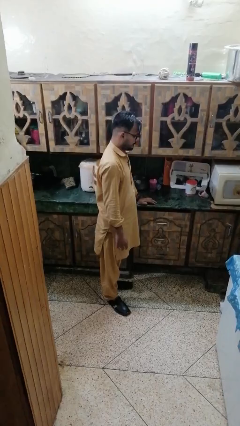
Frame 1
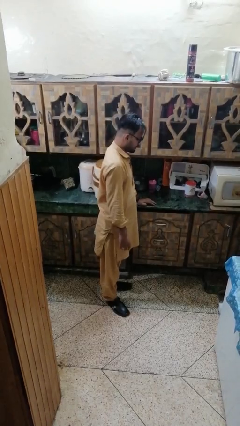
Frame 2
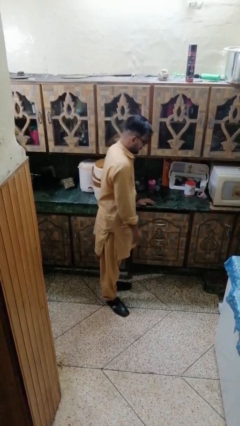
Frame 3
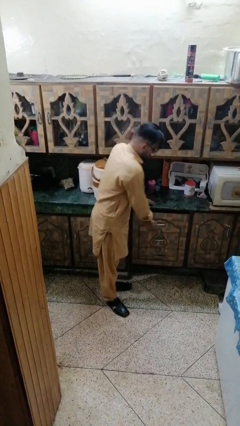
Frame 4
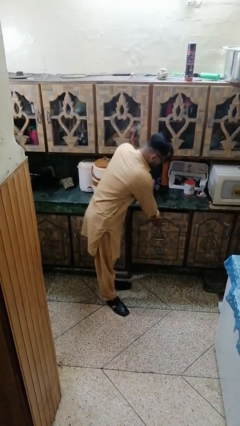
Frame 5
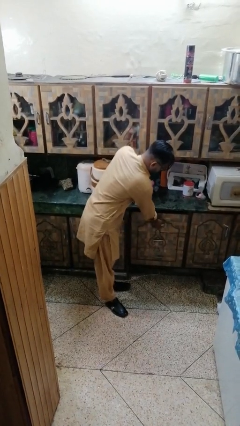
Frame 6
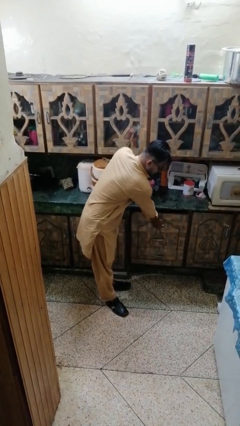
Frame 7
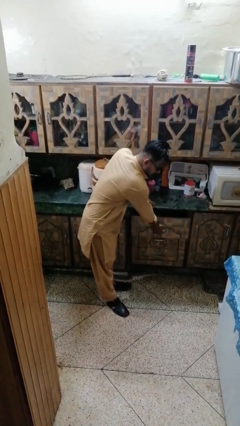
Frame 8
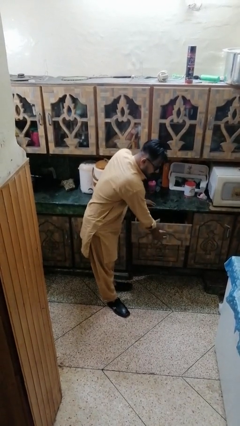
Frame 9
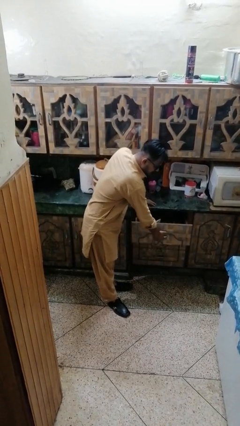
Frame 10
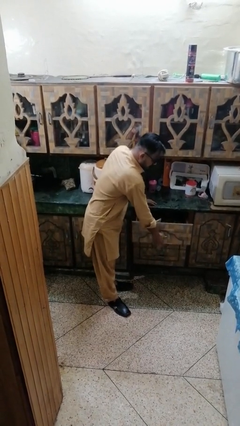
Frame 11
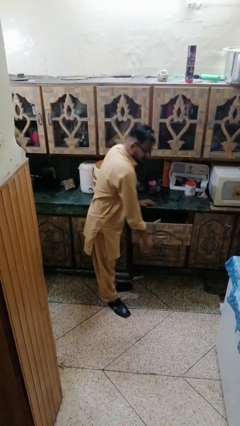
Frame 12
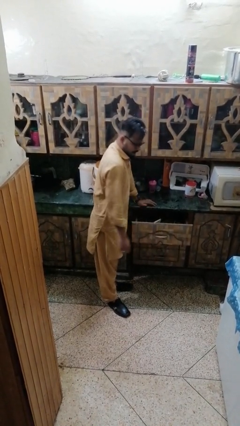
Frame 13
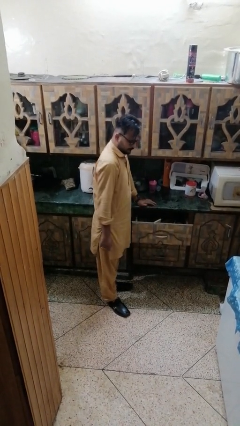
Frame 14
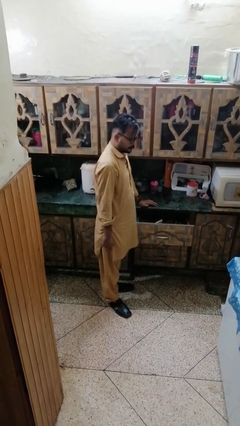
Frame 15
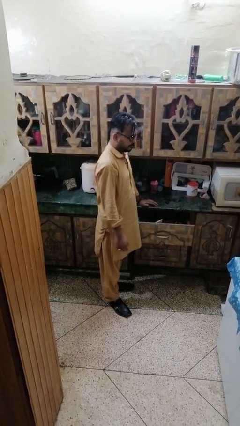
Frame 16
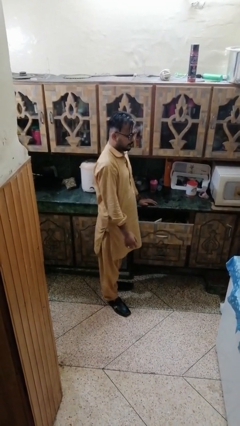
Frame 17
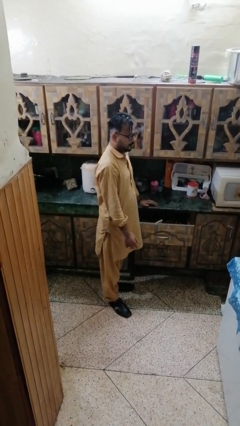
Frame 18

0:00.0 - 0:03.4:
person opens kitchen drawer

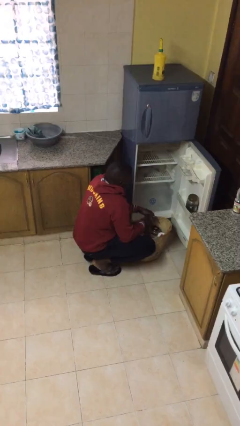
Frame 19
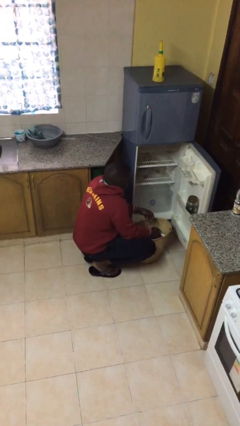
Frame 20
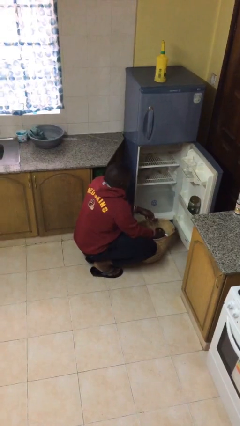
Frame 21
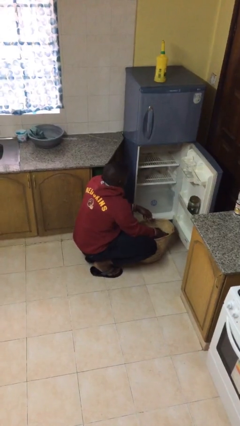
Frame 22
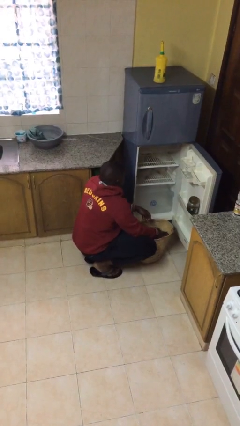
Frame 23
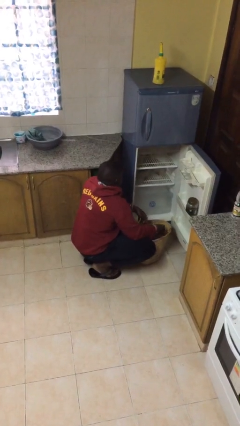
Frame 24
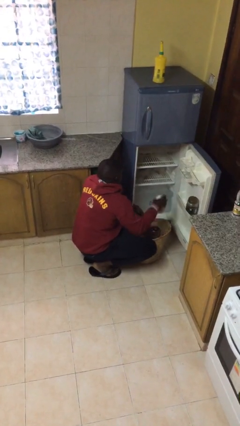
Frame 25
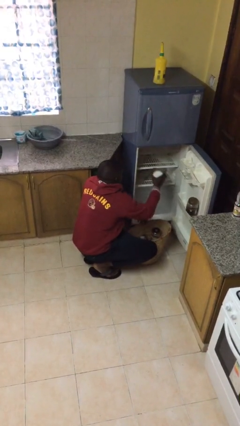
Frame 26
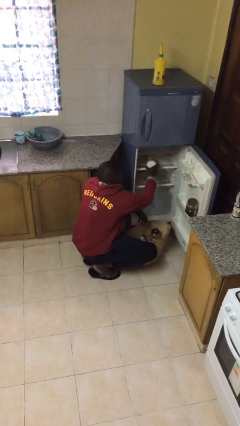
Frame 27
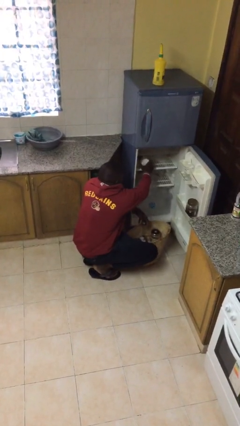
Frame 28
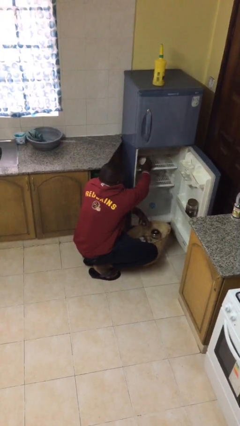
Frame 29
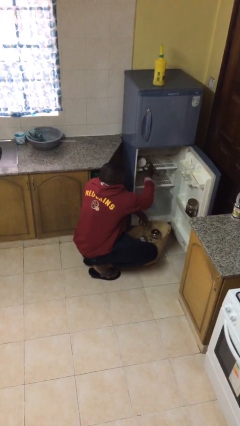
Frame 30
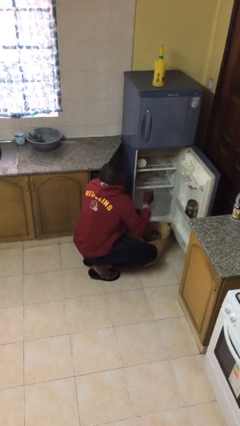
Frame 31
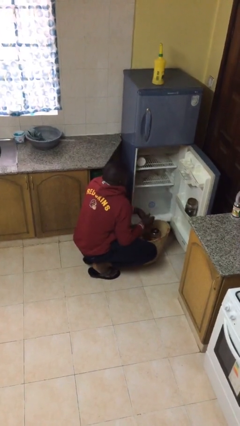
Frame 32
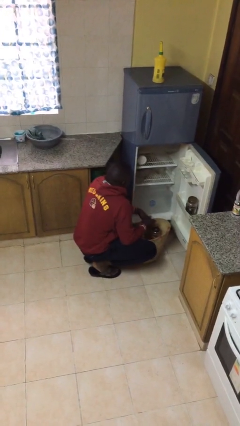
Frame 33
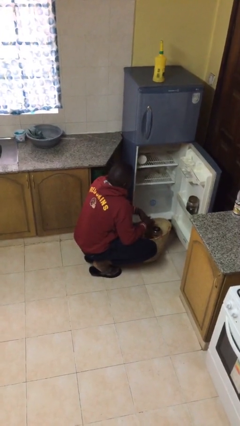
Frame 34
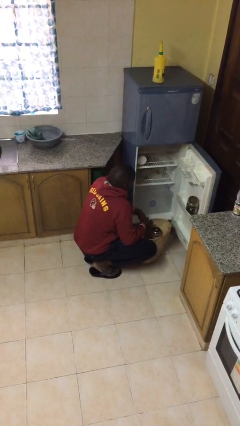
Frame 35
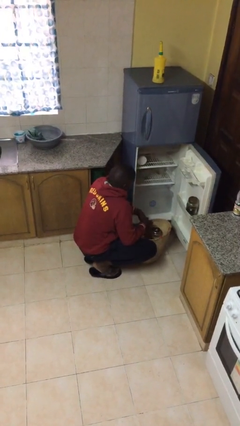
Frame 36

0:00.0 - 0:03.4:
person loads groceries into refrigerator

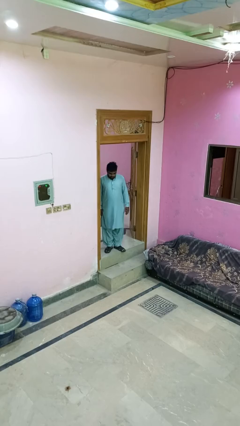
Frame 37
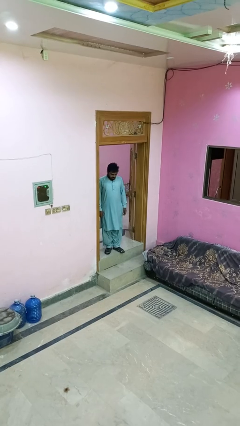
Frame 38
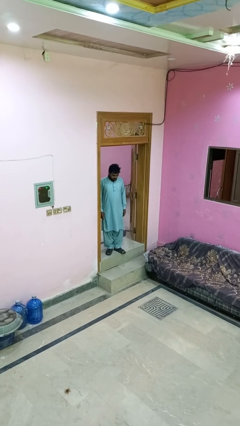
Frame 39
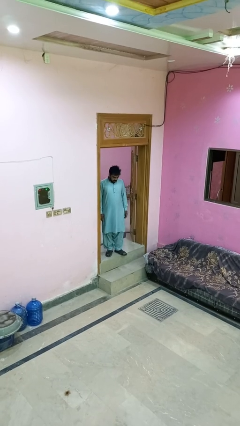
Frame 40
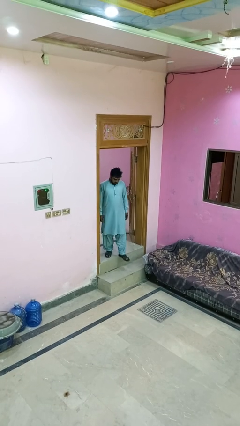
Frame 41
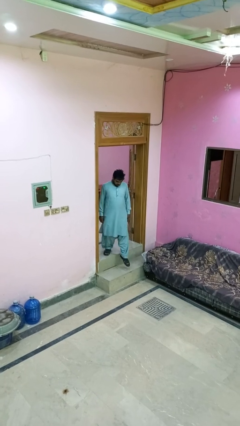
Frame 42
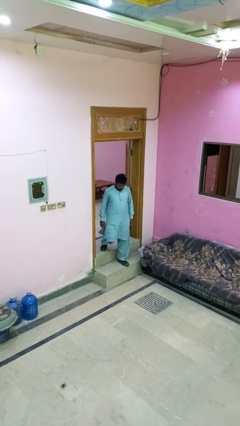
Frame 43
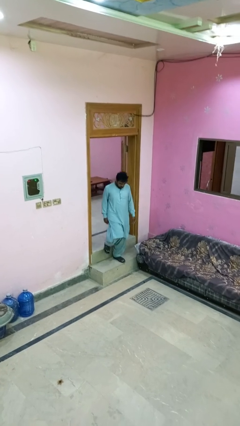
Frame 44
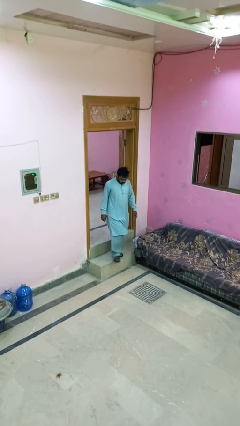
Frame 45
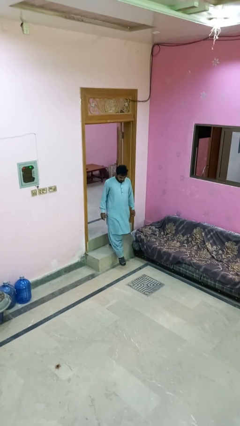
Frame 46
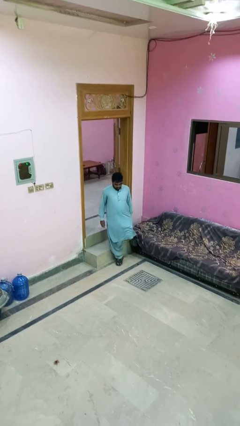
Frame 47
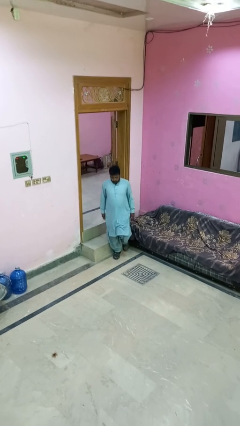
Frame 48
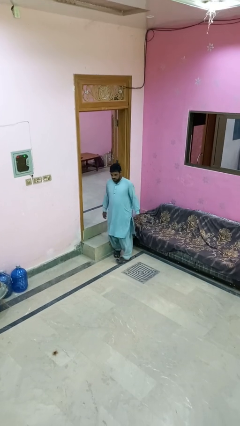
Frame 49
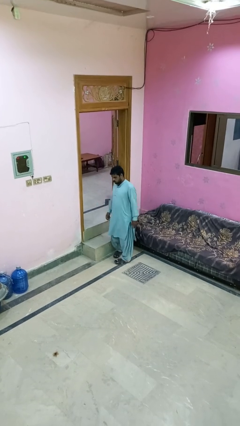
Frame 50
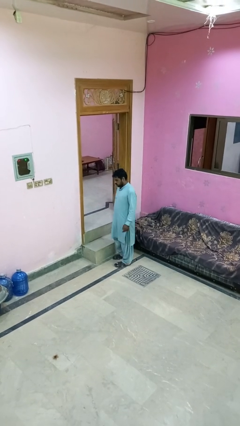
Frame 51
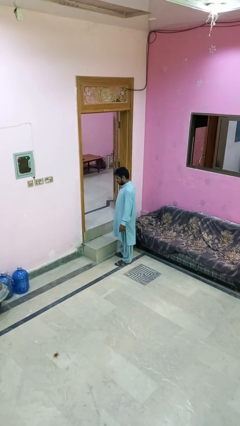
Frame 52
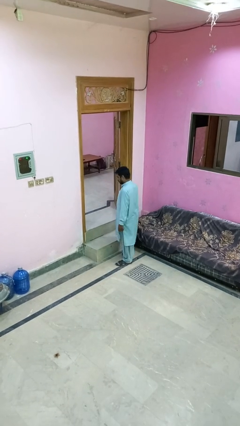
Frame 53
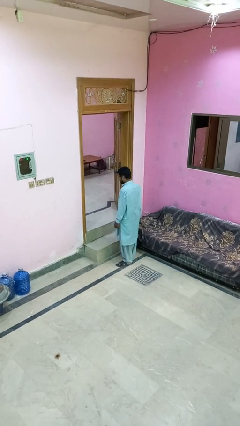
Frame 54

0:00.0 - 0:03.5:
person climbs down stairs

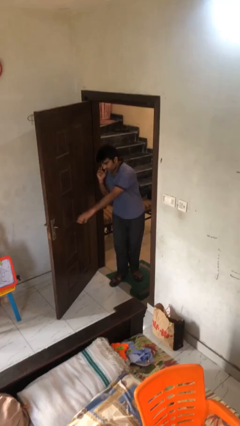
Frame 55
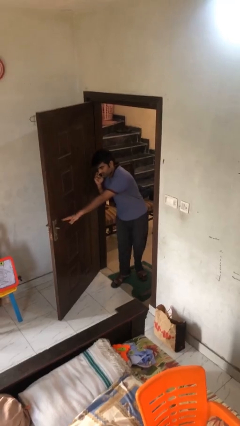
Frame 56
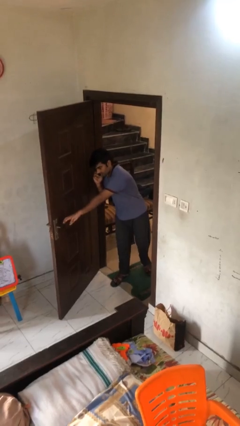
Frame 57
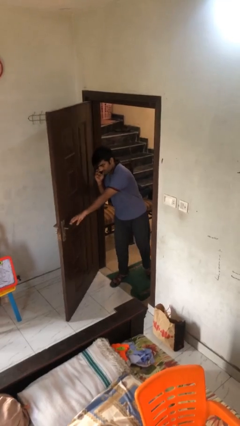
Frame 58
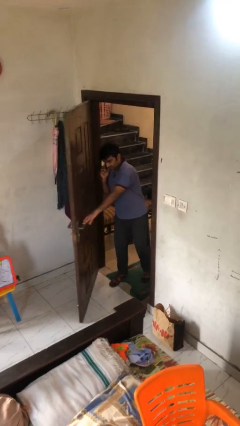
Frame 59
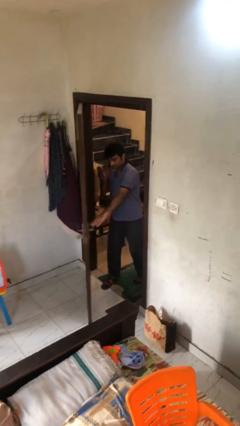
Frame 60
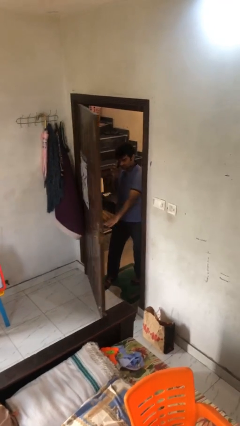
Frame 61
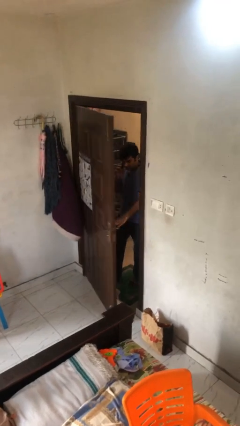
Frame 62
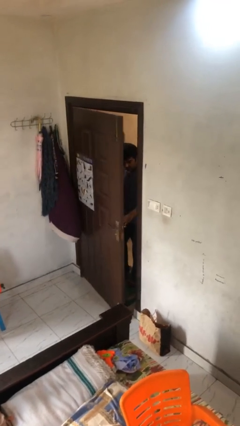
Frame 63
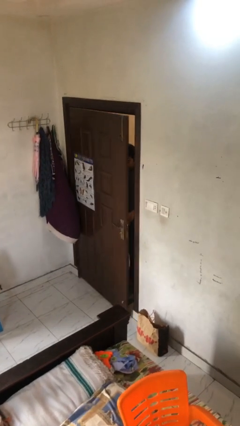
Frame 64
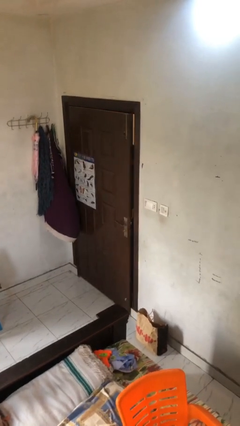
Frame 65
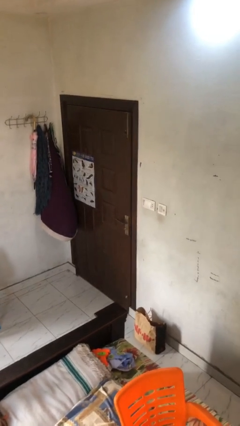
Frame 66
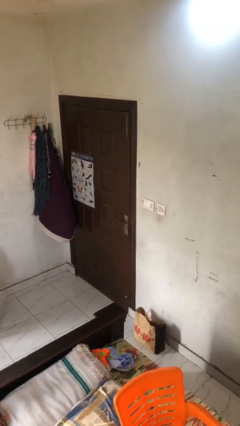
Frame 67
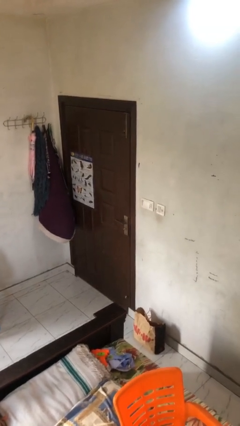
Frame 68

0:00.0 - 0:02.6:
person closes facility door

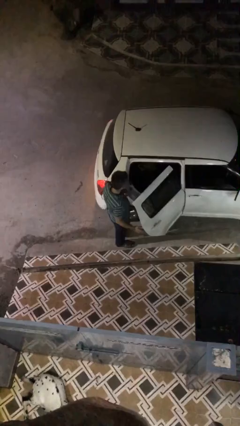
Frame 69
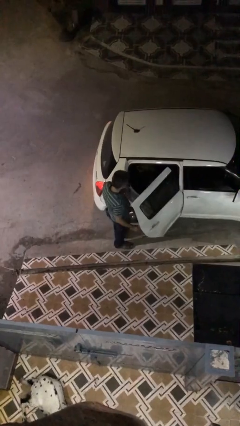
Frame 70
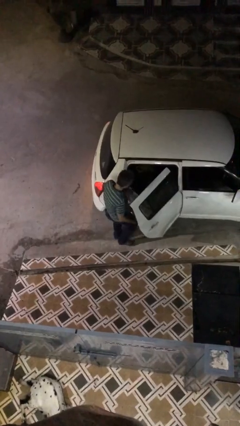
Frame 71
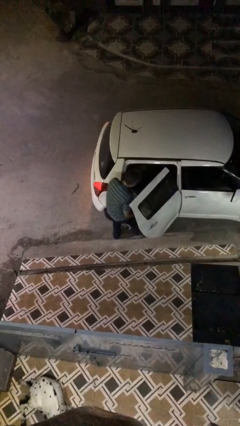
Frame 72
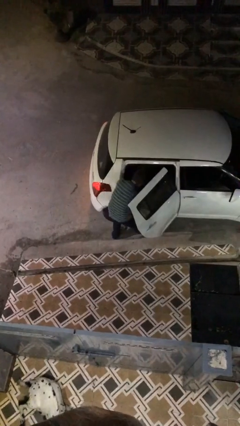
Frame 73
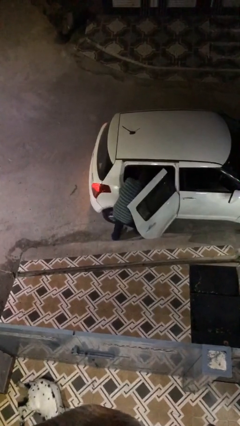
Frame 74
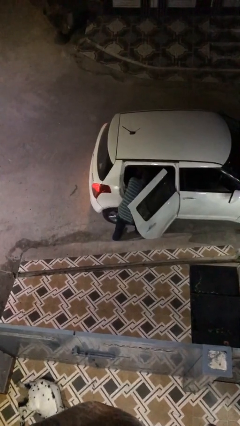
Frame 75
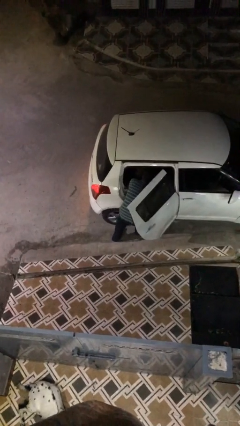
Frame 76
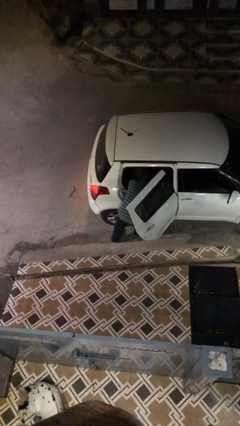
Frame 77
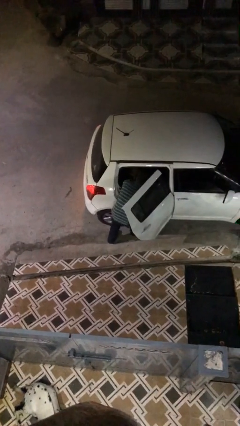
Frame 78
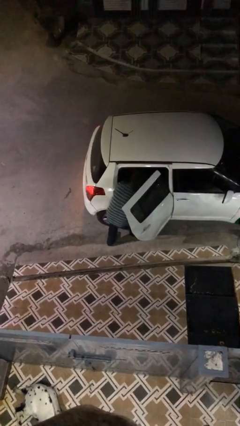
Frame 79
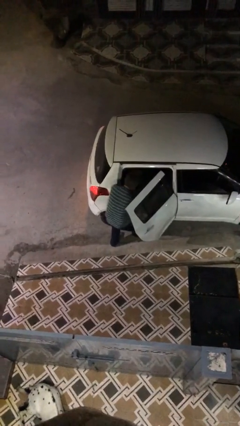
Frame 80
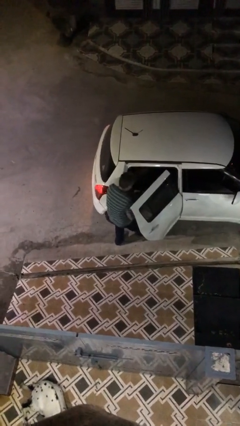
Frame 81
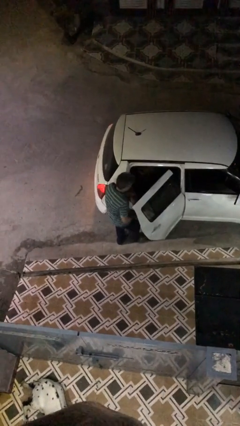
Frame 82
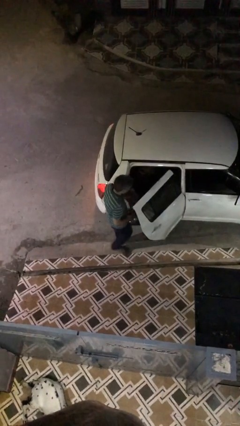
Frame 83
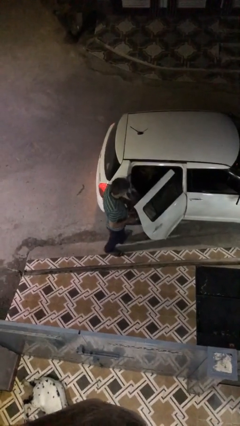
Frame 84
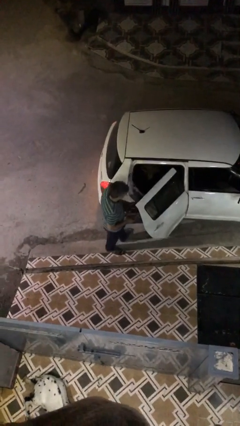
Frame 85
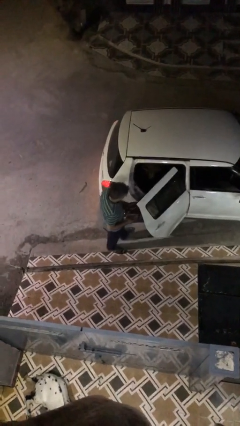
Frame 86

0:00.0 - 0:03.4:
person unloads car

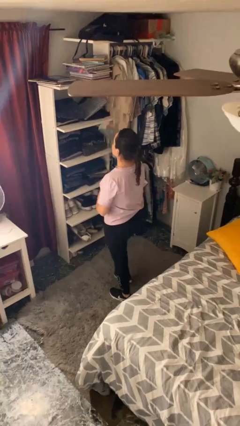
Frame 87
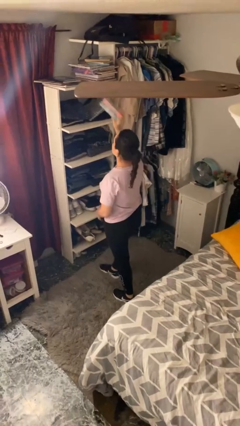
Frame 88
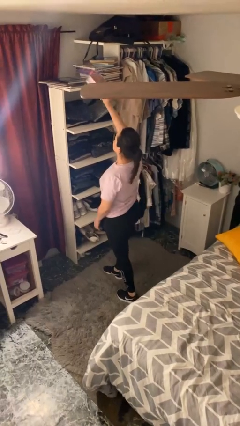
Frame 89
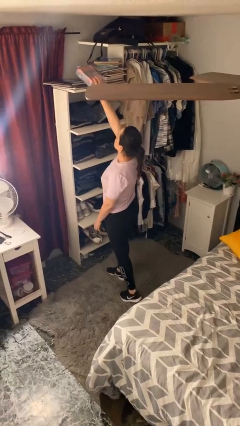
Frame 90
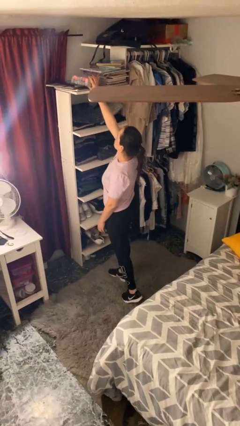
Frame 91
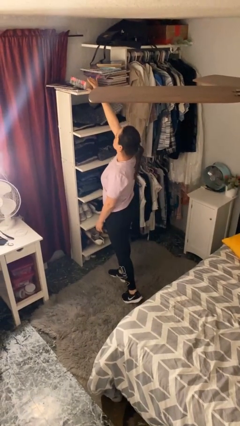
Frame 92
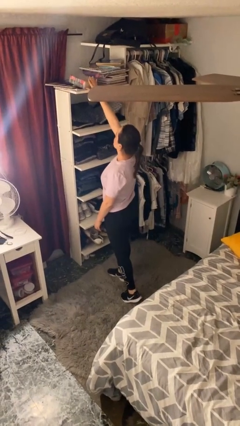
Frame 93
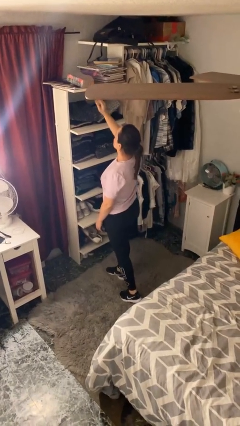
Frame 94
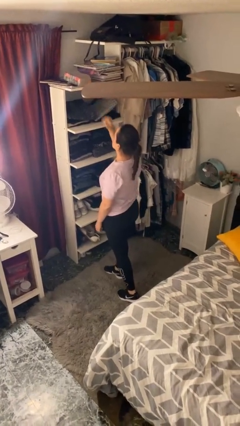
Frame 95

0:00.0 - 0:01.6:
person puts down object on shelf
